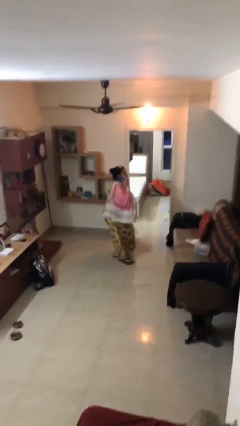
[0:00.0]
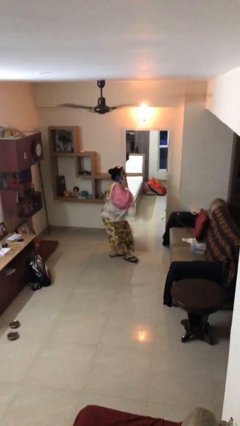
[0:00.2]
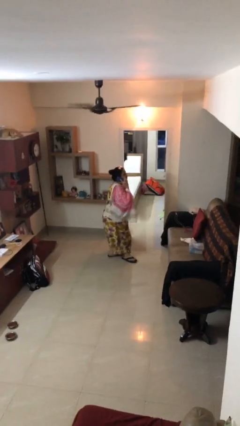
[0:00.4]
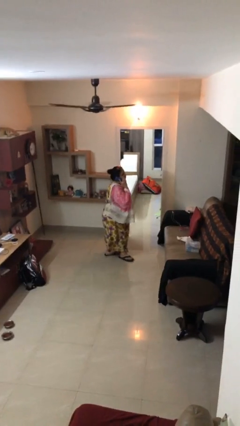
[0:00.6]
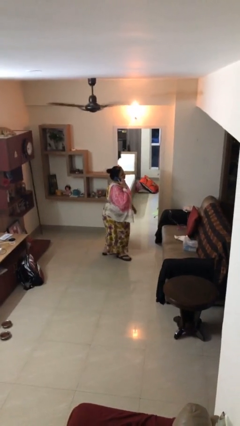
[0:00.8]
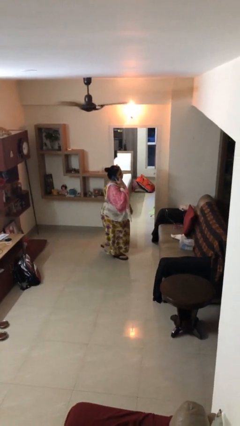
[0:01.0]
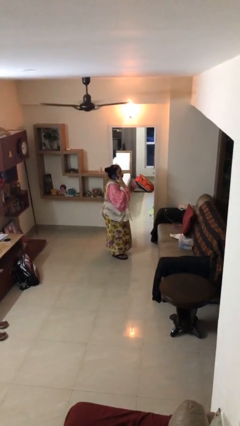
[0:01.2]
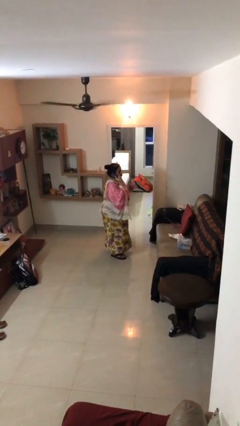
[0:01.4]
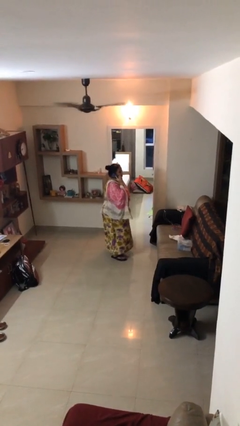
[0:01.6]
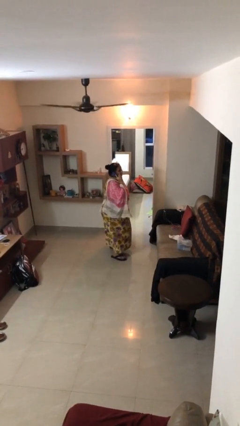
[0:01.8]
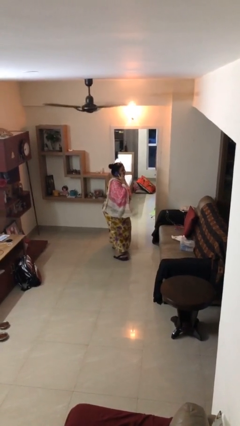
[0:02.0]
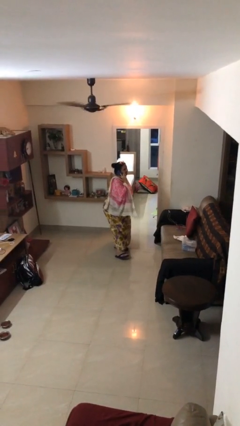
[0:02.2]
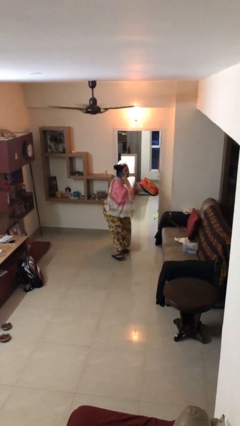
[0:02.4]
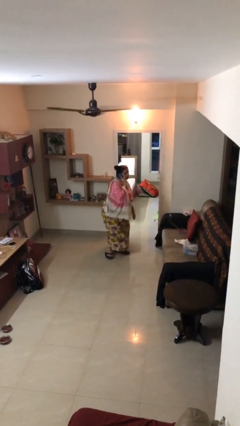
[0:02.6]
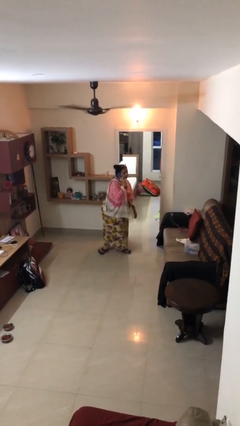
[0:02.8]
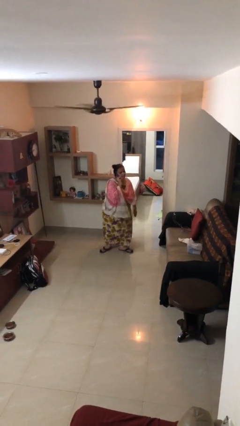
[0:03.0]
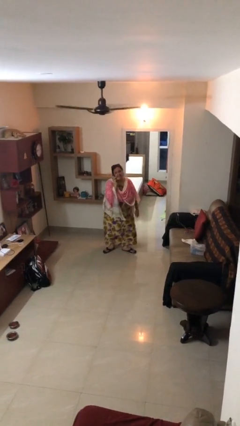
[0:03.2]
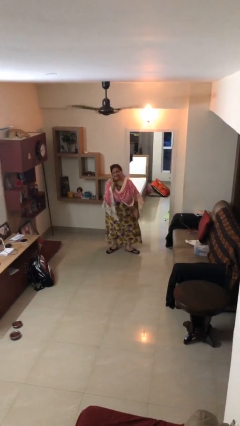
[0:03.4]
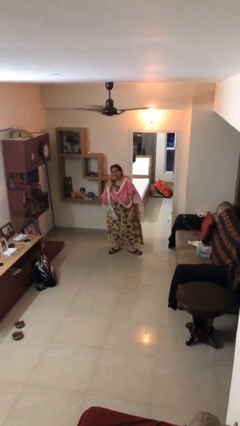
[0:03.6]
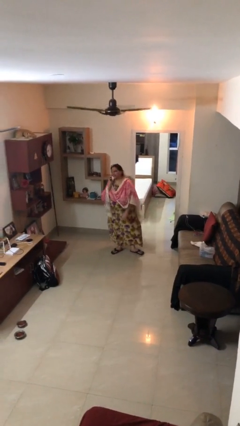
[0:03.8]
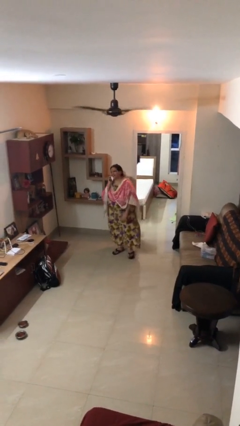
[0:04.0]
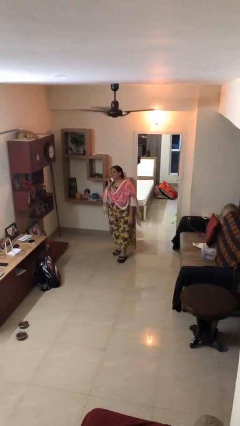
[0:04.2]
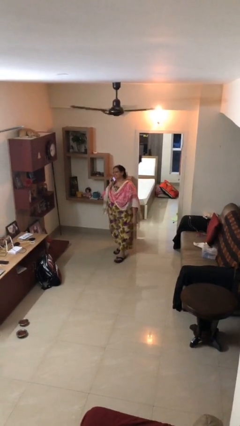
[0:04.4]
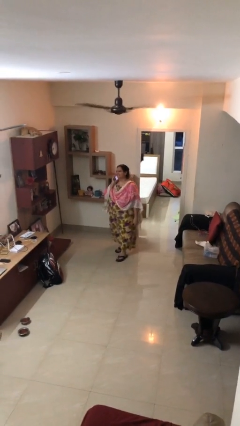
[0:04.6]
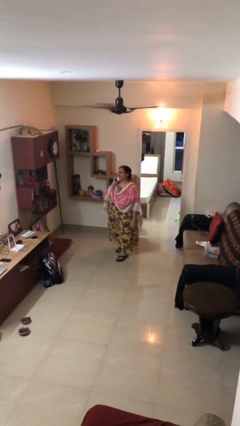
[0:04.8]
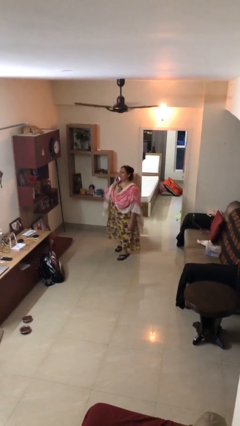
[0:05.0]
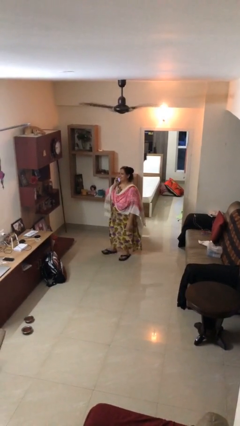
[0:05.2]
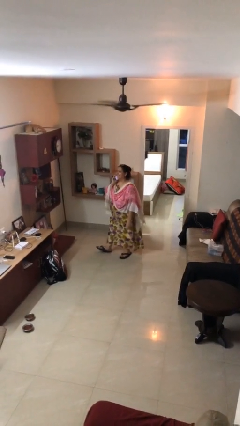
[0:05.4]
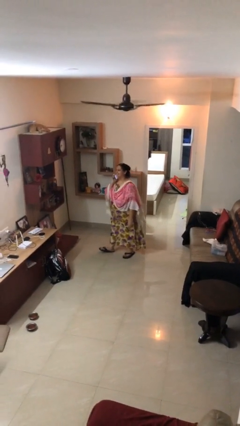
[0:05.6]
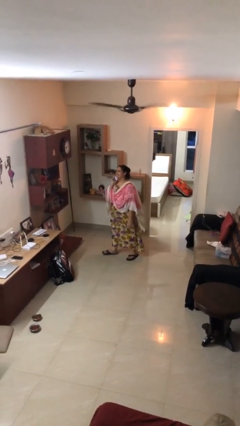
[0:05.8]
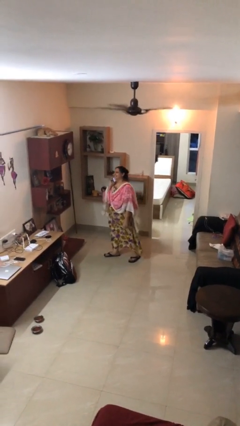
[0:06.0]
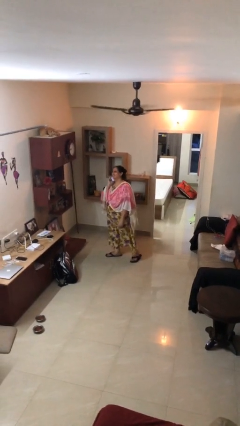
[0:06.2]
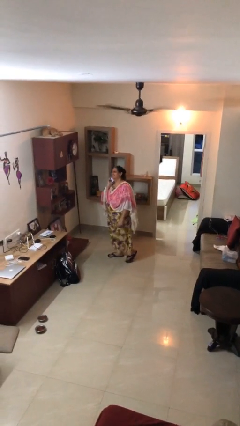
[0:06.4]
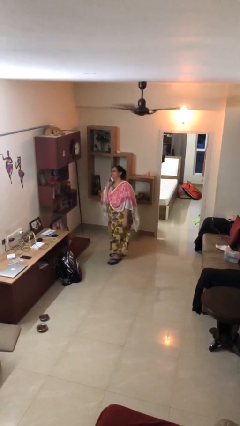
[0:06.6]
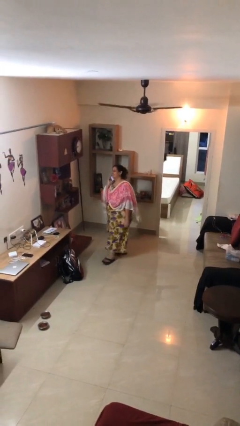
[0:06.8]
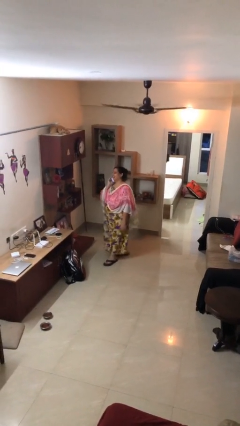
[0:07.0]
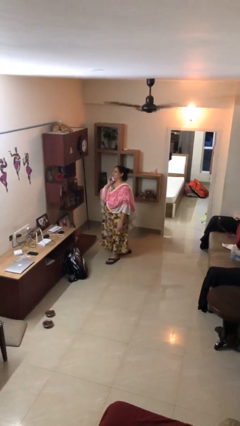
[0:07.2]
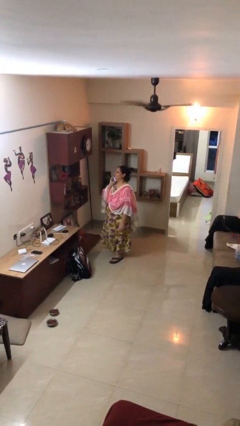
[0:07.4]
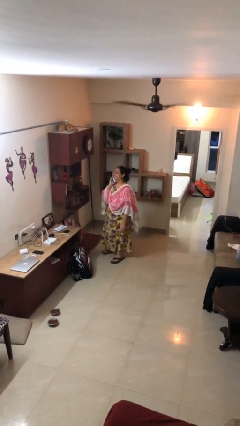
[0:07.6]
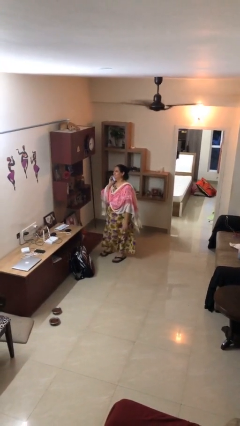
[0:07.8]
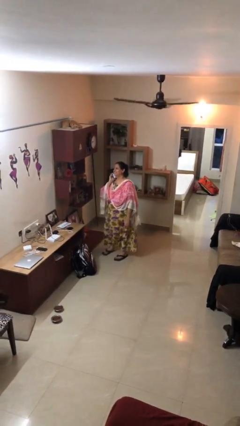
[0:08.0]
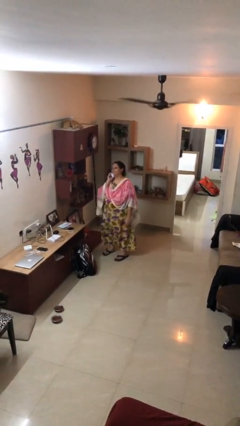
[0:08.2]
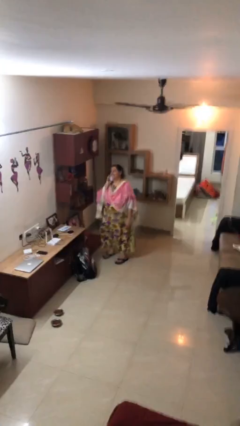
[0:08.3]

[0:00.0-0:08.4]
person talks on phone

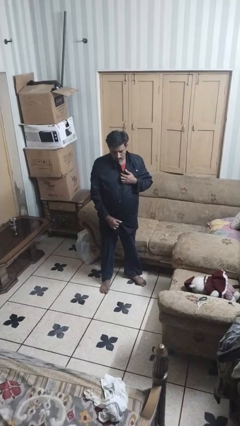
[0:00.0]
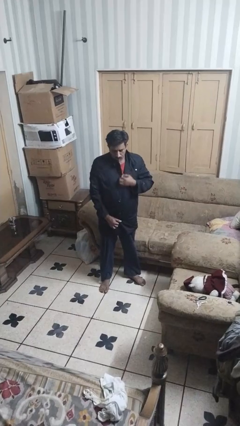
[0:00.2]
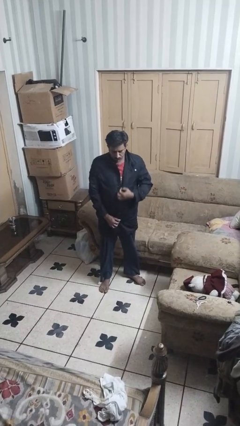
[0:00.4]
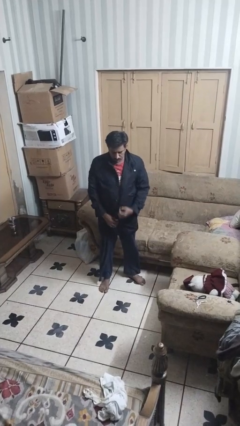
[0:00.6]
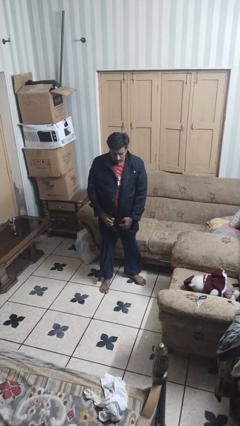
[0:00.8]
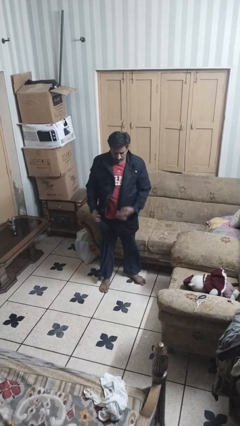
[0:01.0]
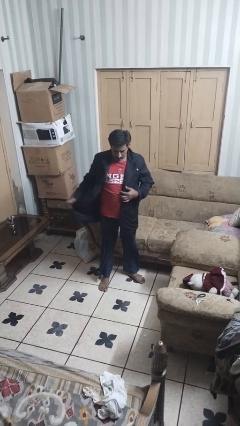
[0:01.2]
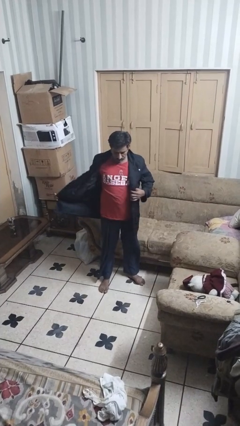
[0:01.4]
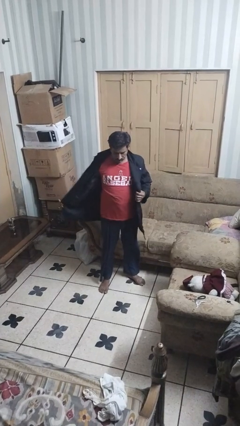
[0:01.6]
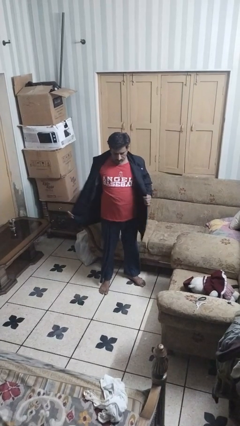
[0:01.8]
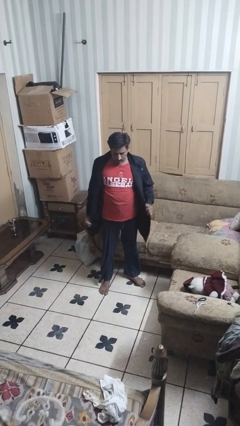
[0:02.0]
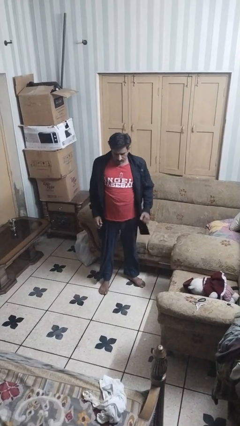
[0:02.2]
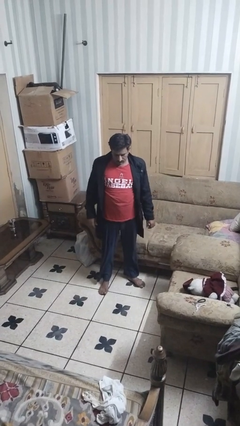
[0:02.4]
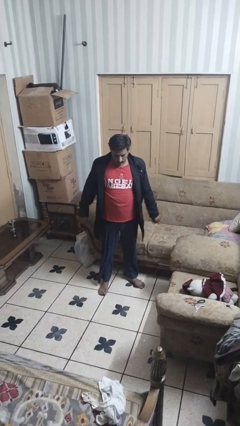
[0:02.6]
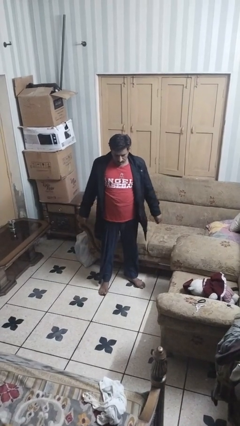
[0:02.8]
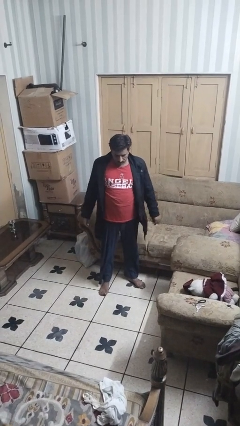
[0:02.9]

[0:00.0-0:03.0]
person unzips jacket

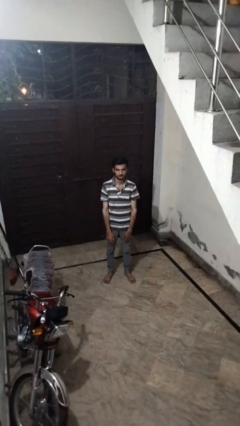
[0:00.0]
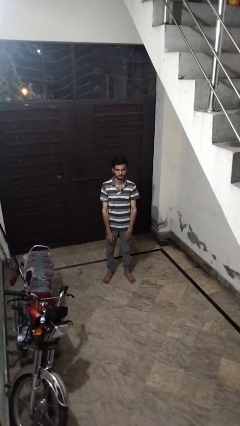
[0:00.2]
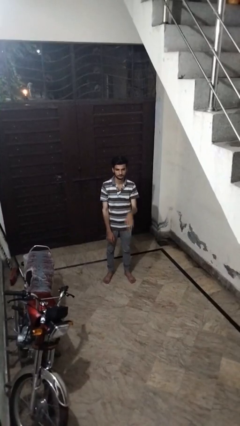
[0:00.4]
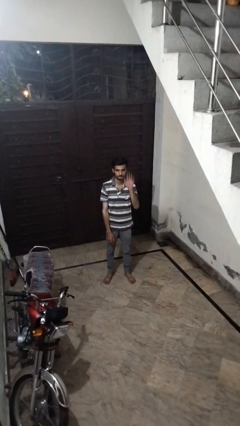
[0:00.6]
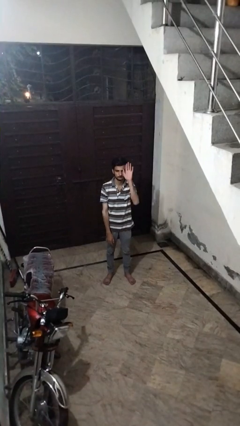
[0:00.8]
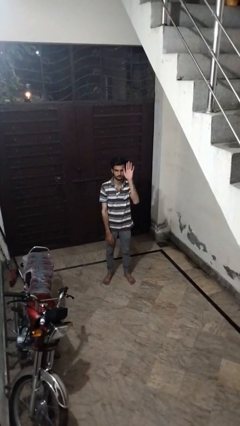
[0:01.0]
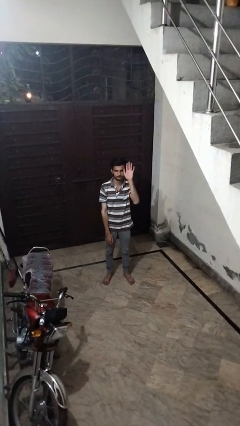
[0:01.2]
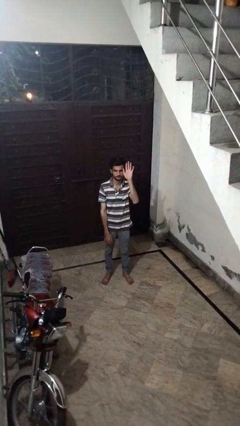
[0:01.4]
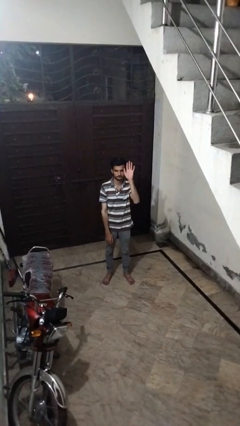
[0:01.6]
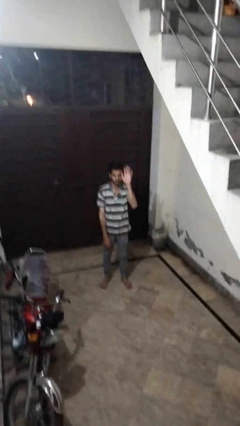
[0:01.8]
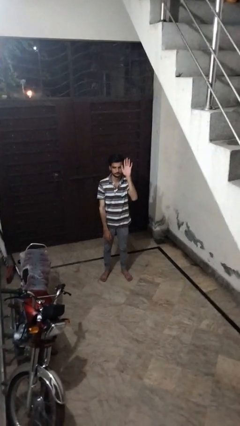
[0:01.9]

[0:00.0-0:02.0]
person gestures raise hand

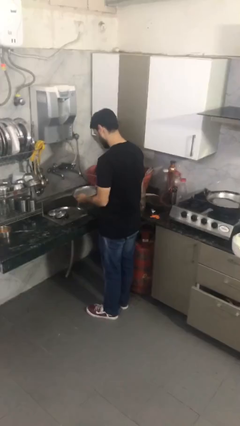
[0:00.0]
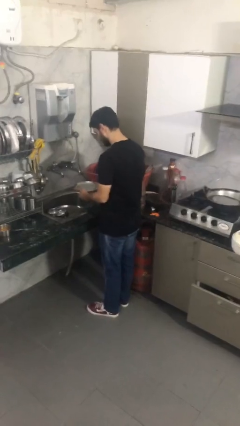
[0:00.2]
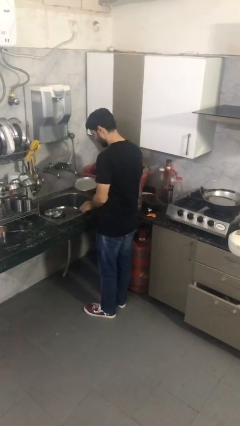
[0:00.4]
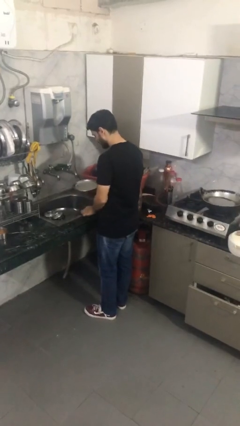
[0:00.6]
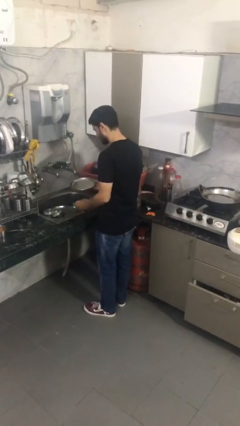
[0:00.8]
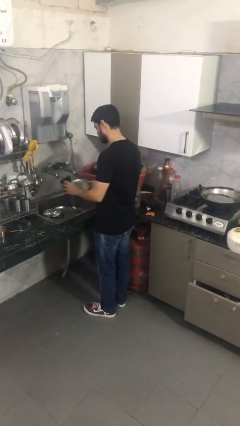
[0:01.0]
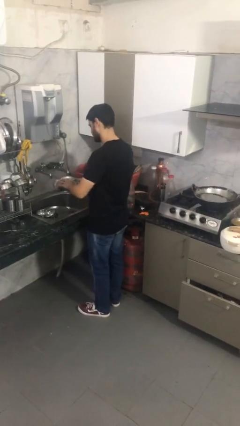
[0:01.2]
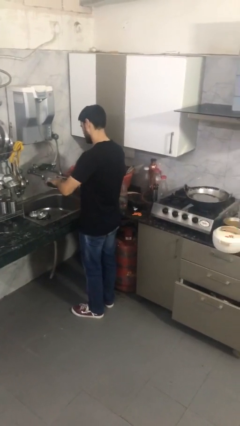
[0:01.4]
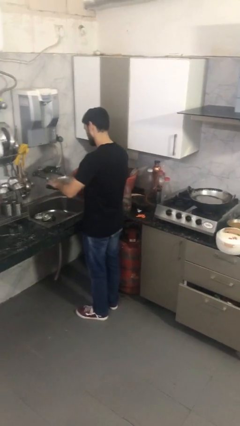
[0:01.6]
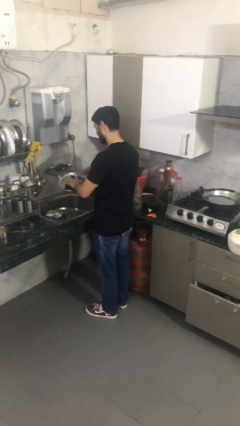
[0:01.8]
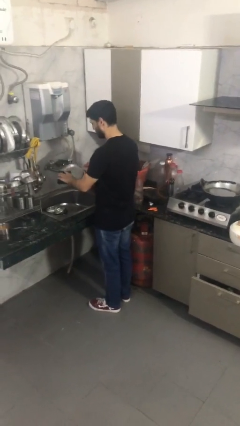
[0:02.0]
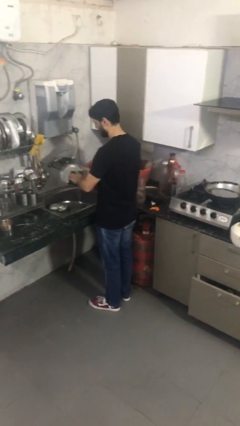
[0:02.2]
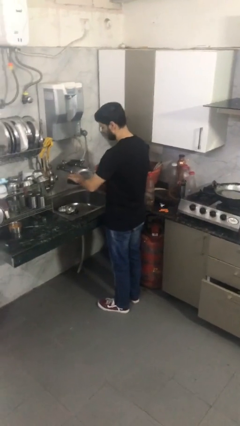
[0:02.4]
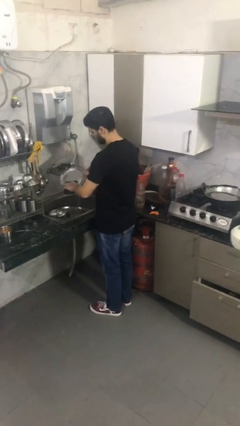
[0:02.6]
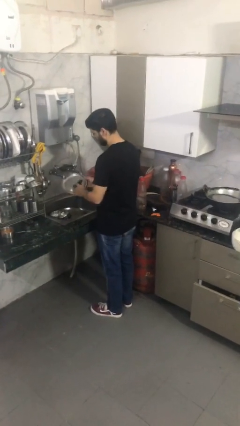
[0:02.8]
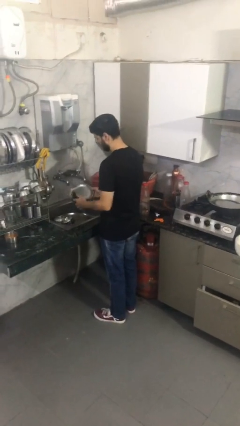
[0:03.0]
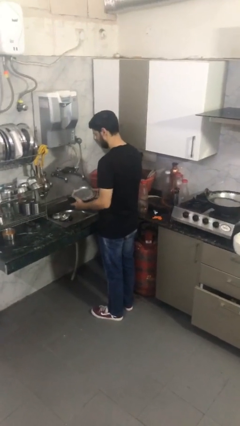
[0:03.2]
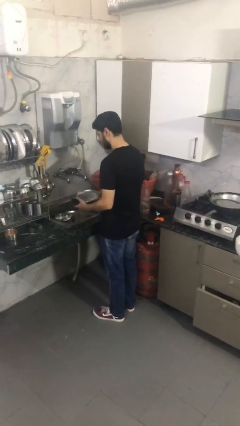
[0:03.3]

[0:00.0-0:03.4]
person washes dish

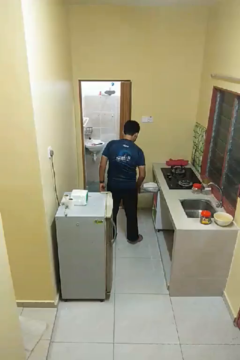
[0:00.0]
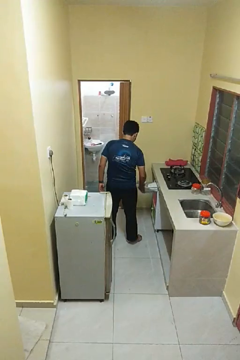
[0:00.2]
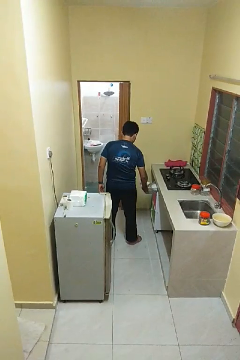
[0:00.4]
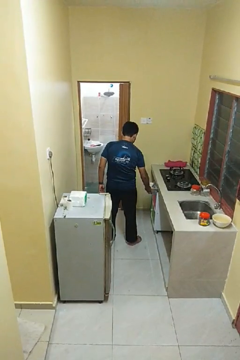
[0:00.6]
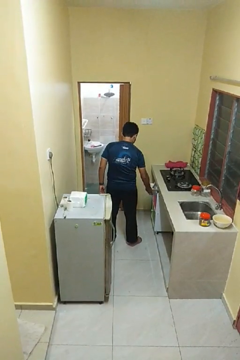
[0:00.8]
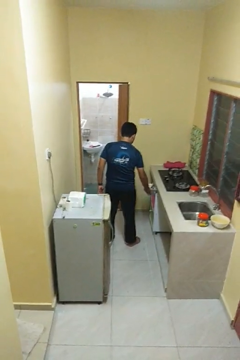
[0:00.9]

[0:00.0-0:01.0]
person closes kitchen drawer
